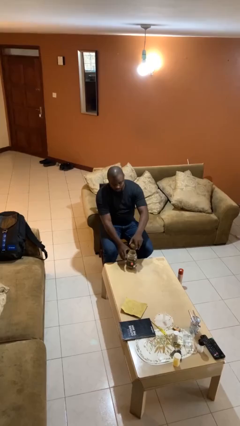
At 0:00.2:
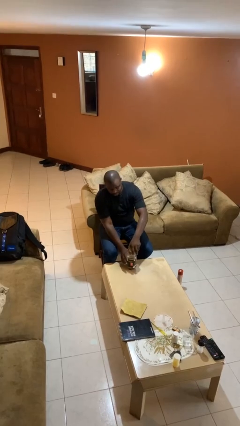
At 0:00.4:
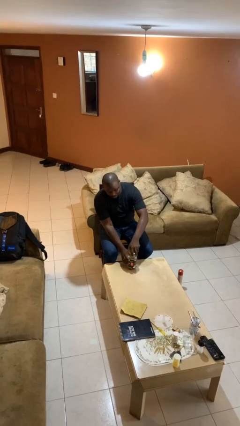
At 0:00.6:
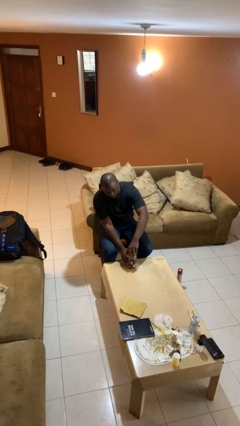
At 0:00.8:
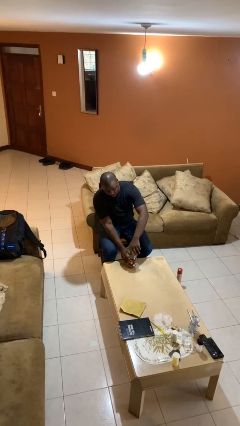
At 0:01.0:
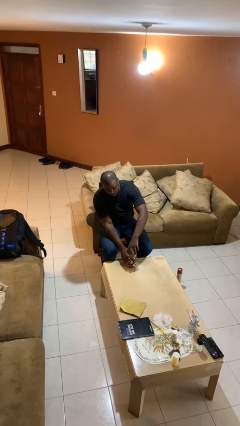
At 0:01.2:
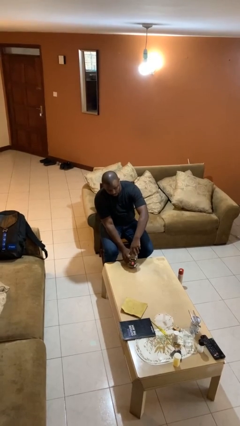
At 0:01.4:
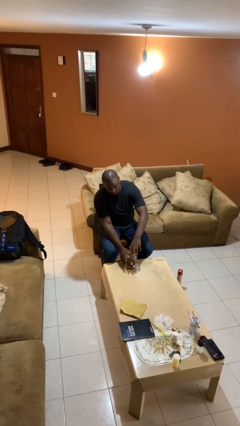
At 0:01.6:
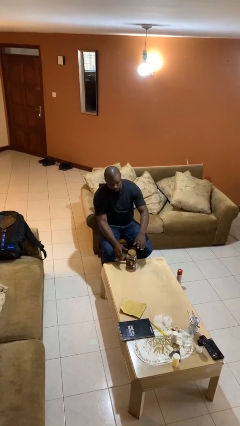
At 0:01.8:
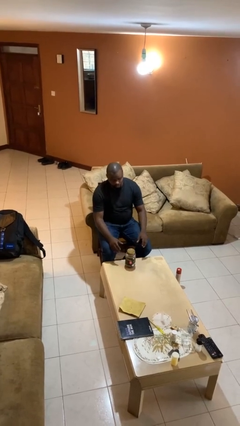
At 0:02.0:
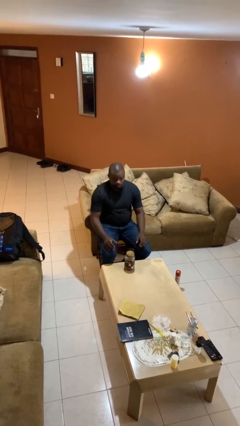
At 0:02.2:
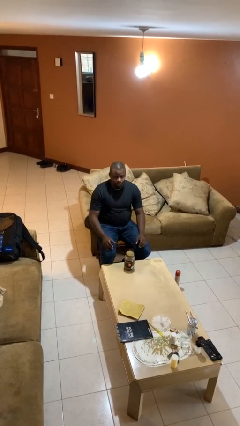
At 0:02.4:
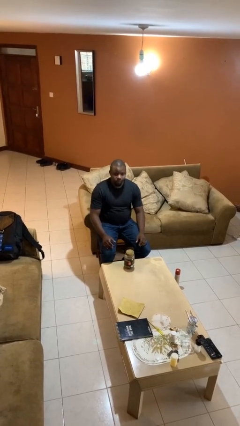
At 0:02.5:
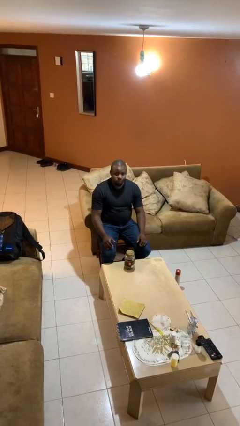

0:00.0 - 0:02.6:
person closes jar

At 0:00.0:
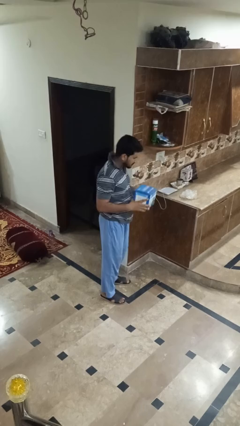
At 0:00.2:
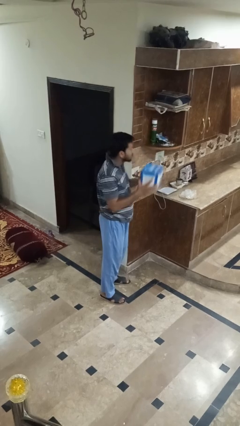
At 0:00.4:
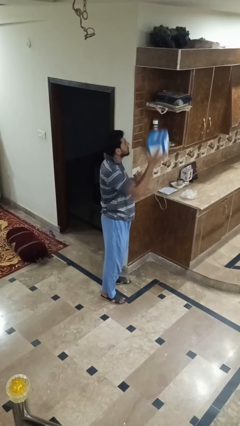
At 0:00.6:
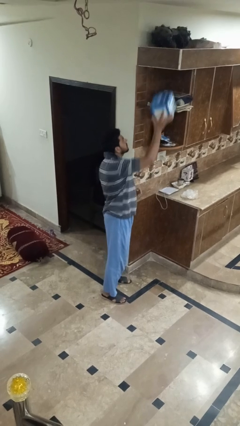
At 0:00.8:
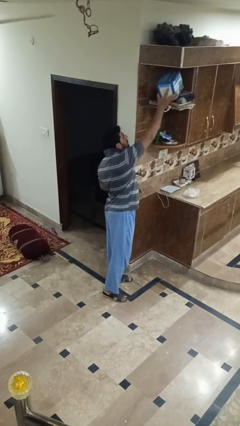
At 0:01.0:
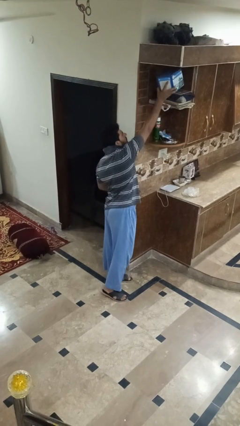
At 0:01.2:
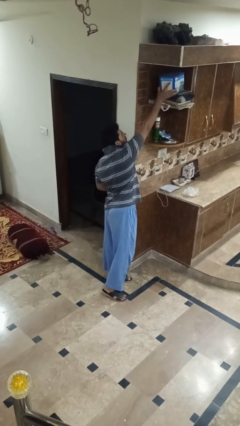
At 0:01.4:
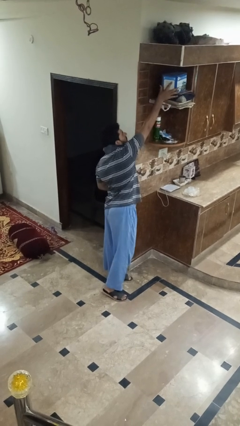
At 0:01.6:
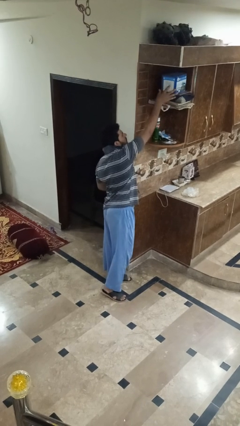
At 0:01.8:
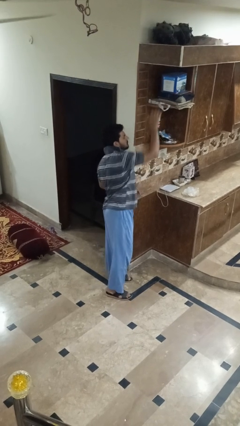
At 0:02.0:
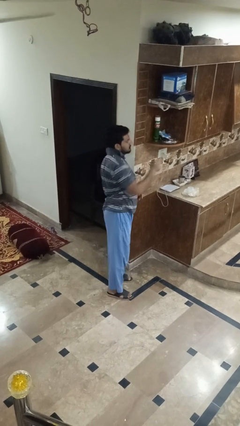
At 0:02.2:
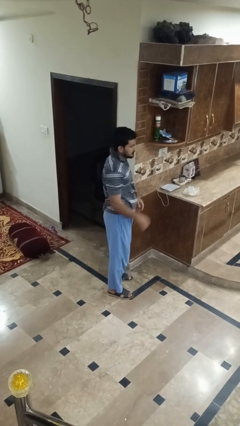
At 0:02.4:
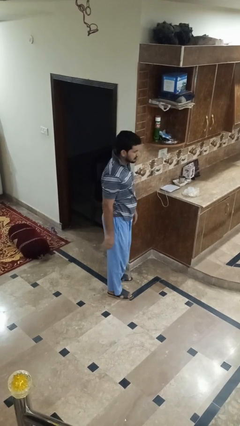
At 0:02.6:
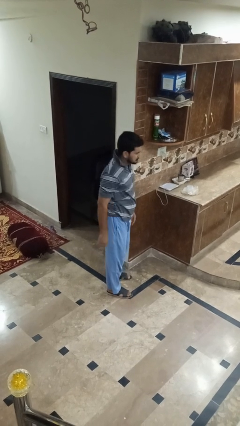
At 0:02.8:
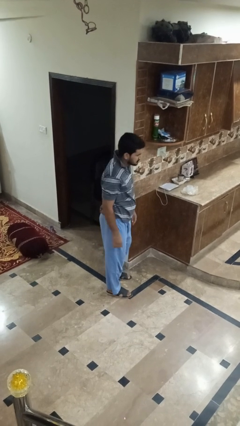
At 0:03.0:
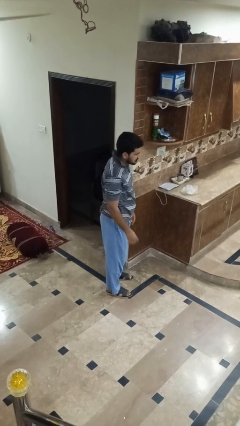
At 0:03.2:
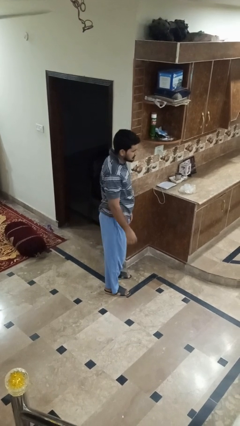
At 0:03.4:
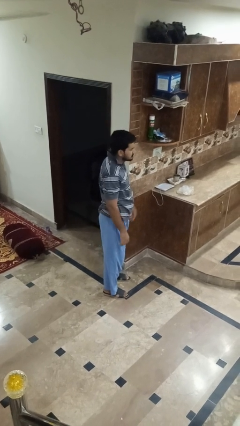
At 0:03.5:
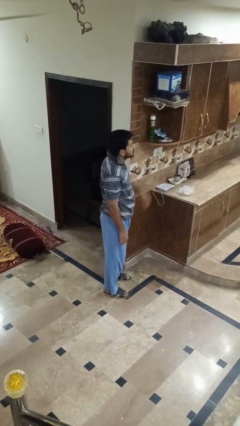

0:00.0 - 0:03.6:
person picks up object from shelf

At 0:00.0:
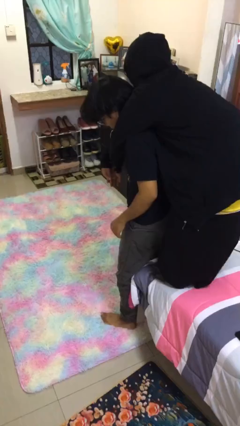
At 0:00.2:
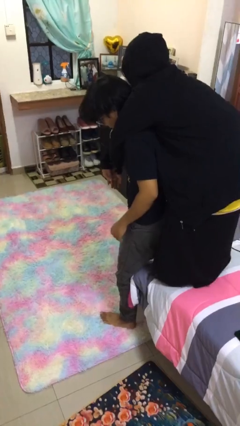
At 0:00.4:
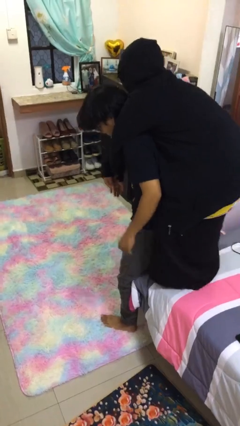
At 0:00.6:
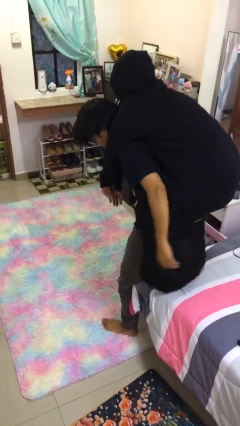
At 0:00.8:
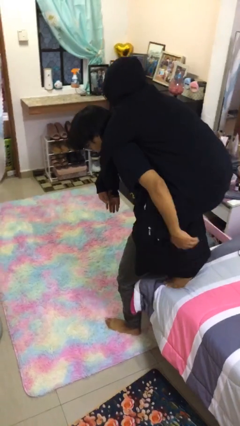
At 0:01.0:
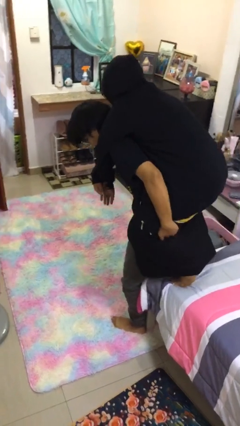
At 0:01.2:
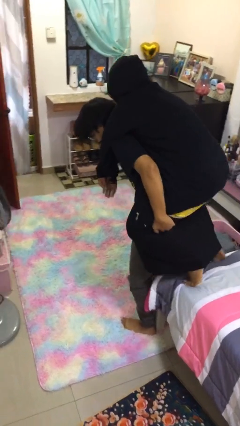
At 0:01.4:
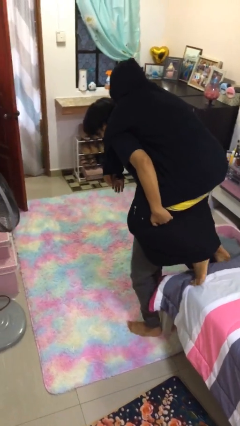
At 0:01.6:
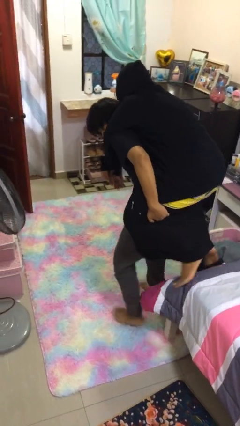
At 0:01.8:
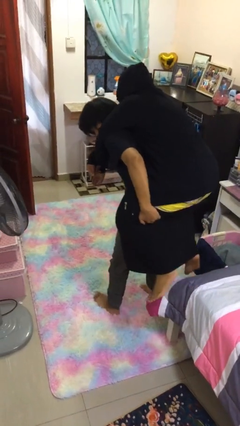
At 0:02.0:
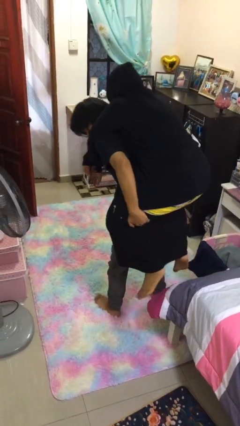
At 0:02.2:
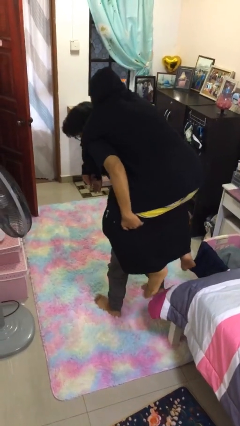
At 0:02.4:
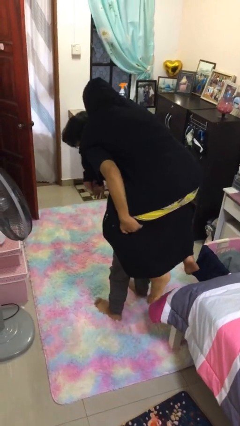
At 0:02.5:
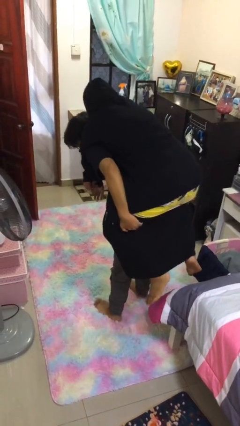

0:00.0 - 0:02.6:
person carries person over shoulder

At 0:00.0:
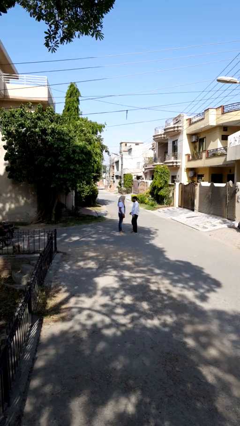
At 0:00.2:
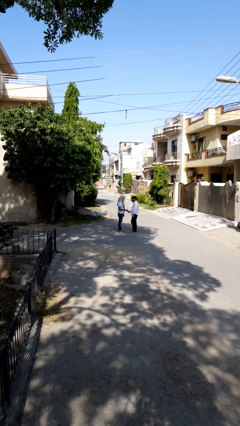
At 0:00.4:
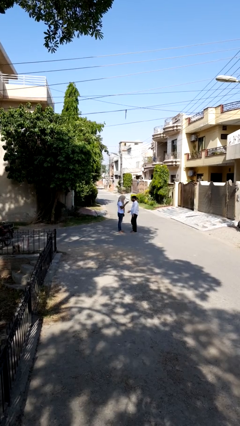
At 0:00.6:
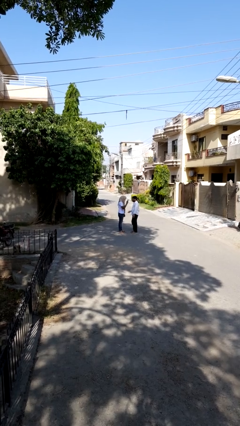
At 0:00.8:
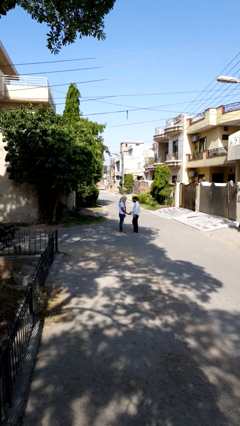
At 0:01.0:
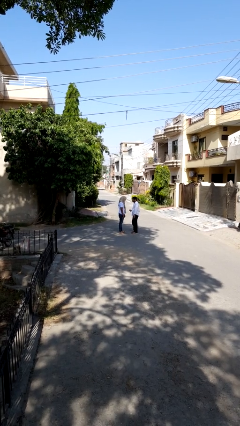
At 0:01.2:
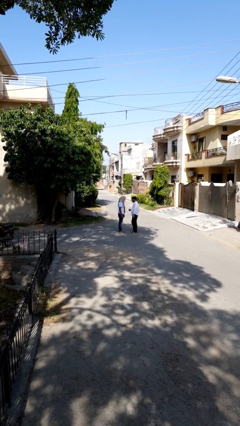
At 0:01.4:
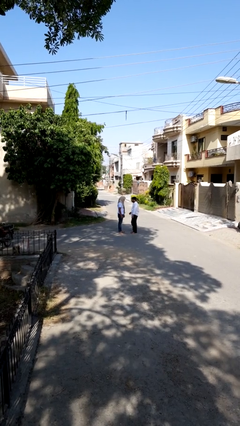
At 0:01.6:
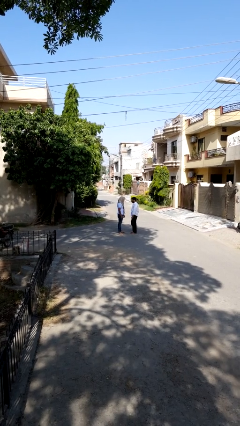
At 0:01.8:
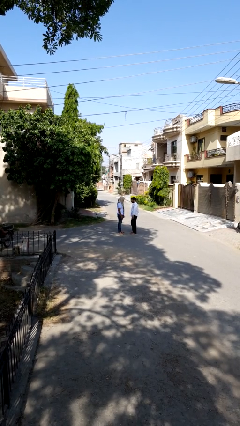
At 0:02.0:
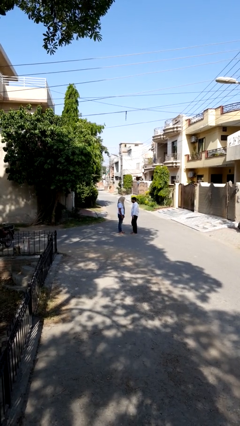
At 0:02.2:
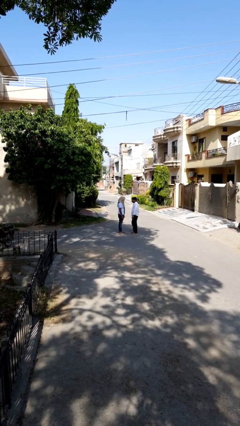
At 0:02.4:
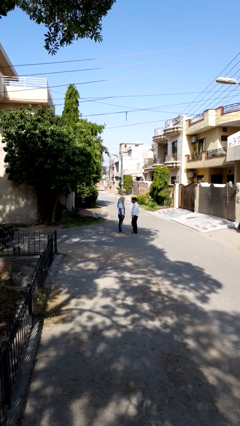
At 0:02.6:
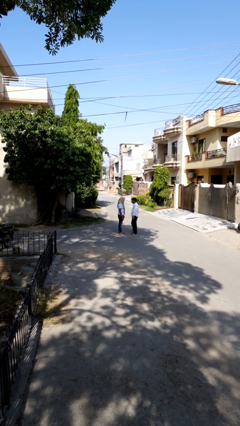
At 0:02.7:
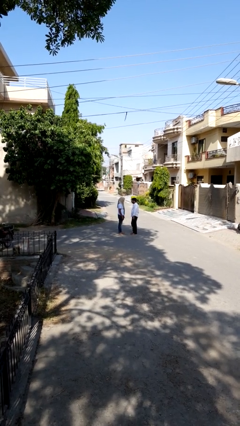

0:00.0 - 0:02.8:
person highfives hand

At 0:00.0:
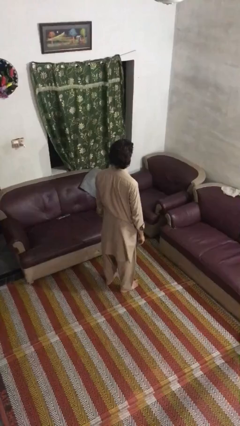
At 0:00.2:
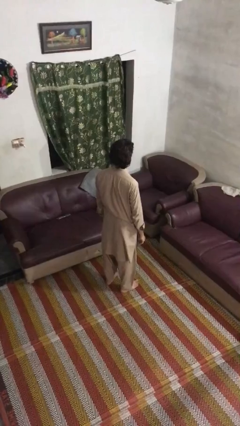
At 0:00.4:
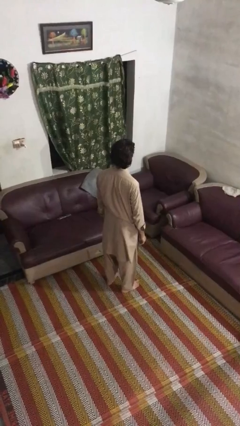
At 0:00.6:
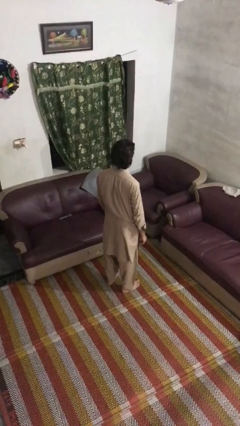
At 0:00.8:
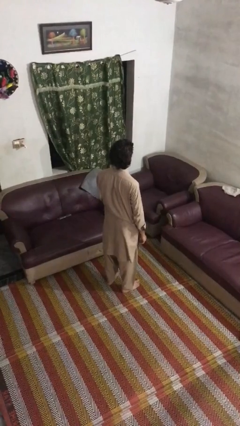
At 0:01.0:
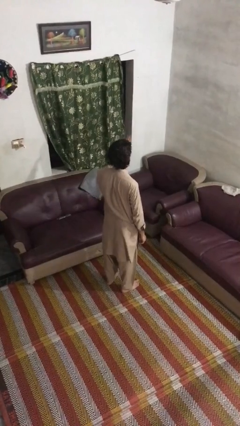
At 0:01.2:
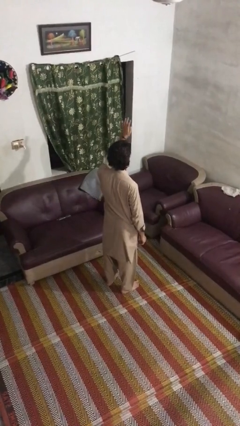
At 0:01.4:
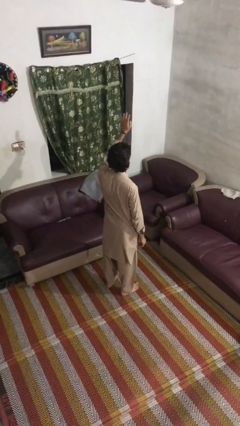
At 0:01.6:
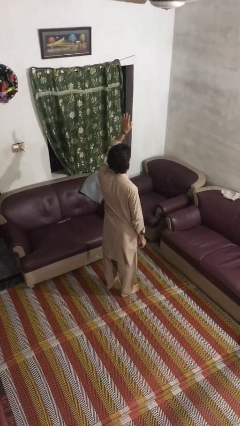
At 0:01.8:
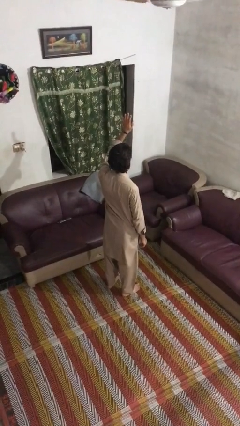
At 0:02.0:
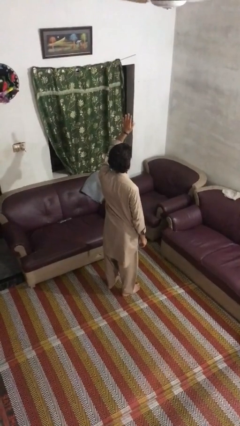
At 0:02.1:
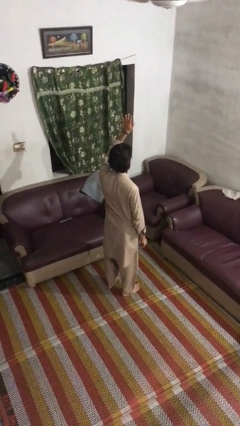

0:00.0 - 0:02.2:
person gestures raise hand

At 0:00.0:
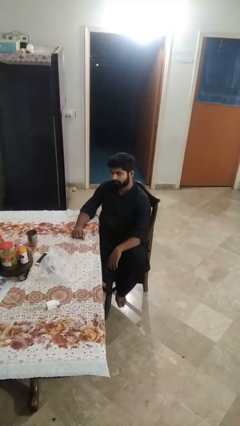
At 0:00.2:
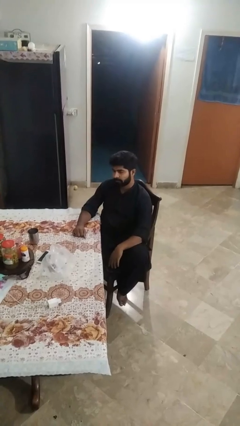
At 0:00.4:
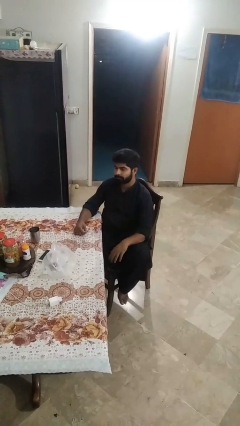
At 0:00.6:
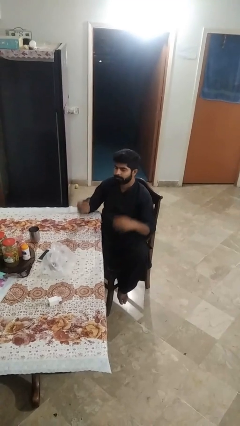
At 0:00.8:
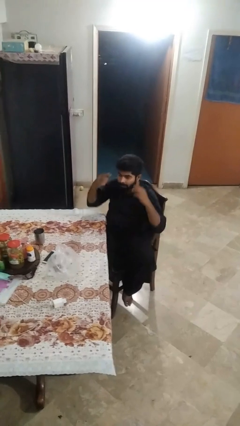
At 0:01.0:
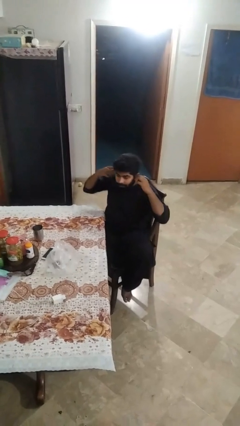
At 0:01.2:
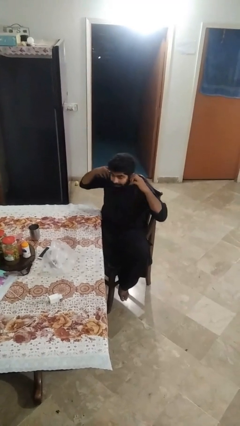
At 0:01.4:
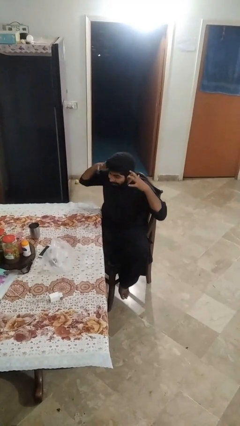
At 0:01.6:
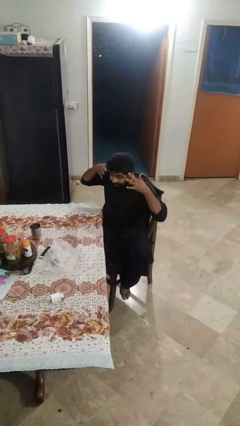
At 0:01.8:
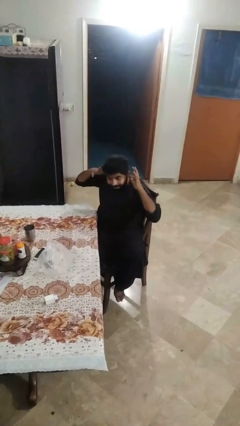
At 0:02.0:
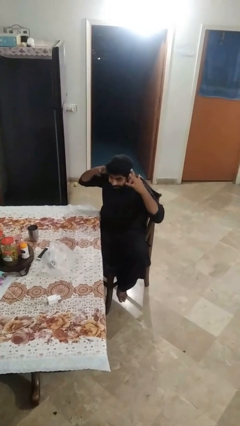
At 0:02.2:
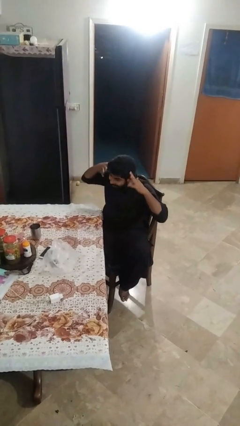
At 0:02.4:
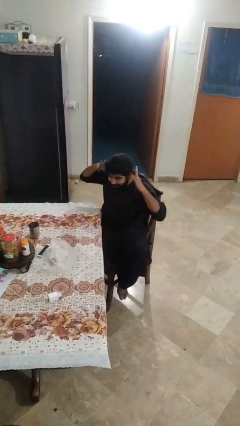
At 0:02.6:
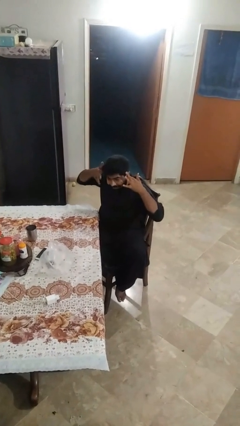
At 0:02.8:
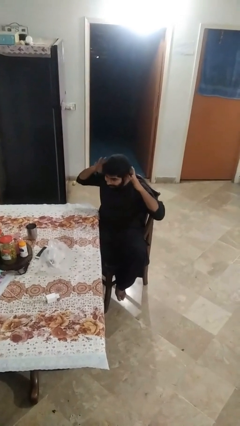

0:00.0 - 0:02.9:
person puts fingers in ear

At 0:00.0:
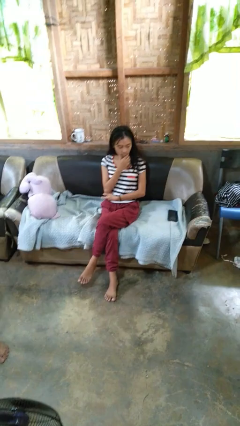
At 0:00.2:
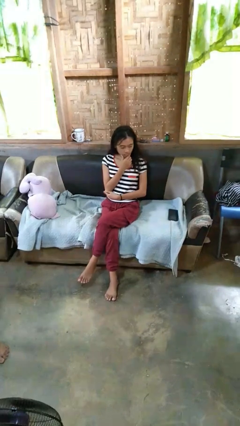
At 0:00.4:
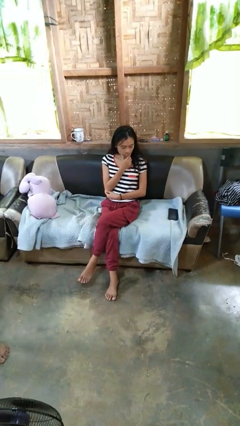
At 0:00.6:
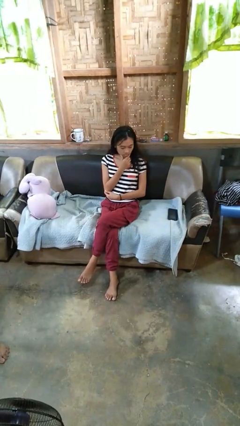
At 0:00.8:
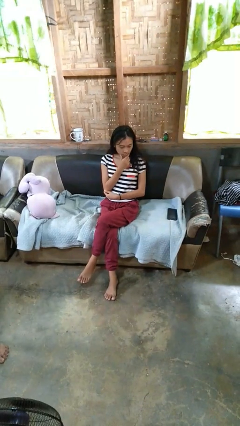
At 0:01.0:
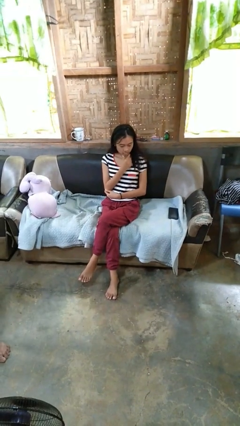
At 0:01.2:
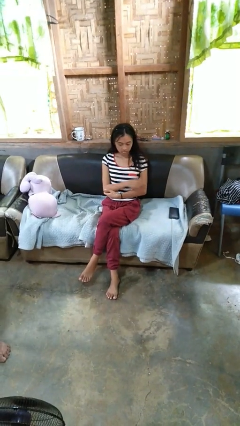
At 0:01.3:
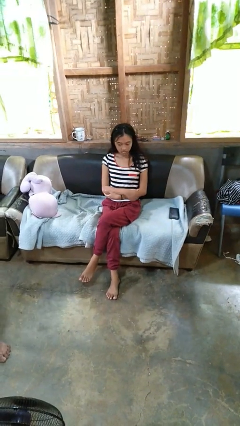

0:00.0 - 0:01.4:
person strokes chin
